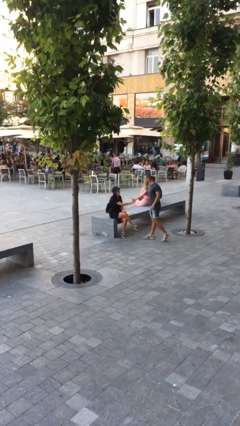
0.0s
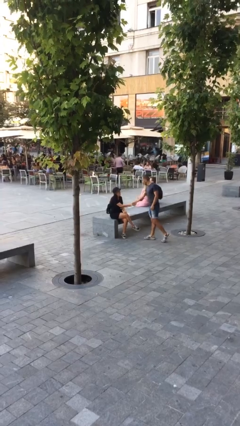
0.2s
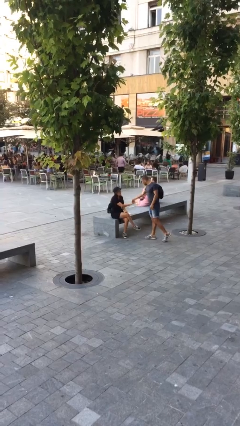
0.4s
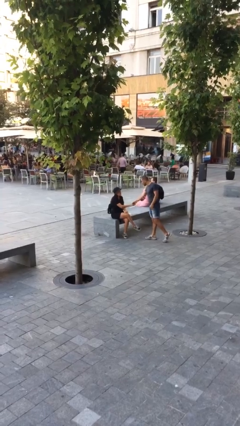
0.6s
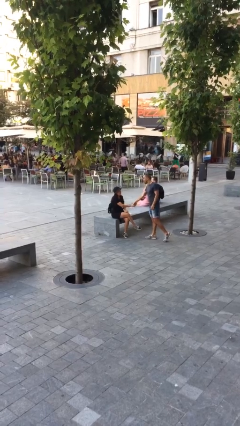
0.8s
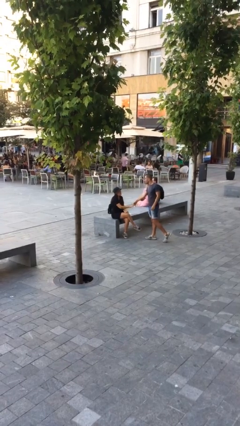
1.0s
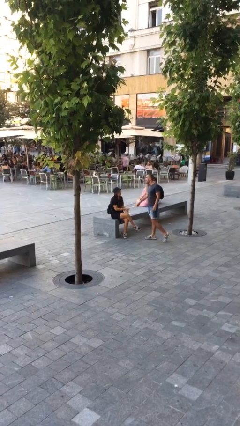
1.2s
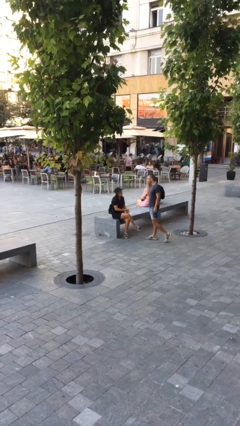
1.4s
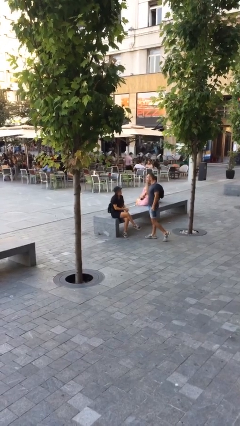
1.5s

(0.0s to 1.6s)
person shakes hand

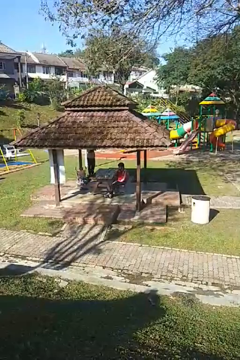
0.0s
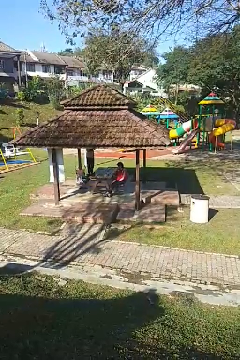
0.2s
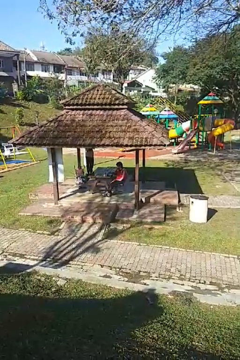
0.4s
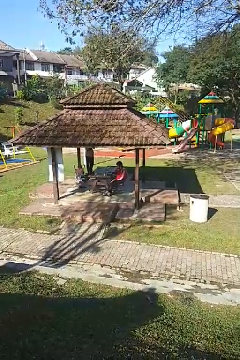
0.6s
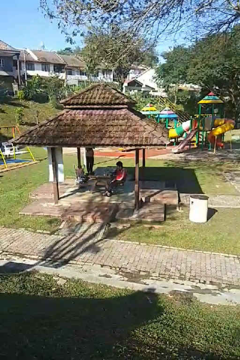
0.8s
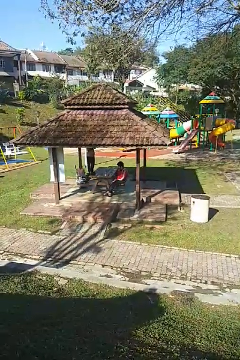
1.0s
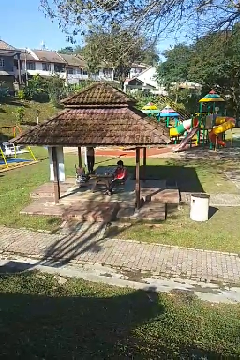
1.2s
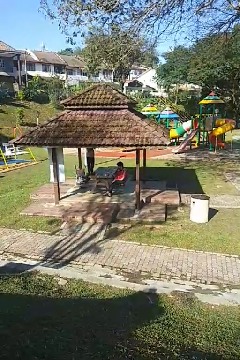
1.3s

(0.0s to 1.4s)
person puts down object on table

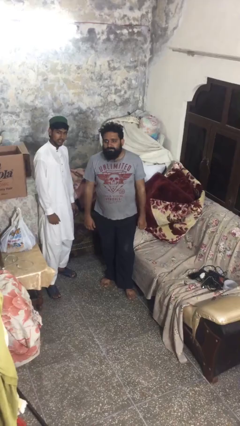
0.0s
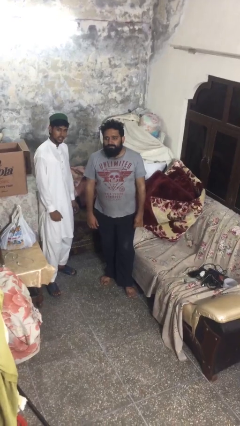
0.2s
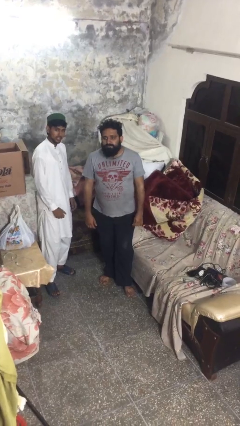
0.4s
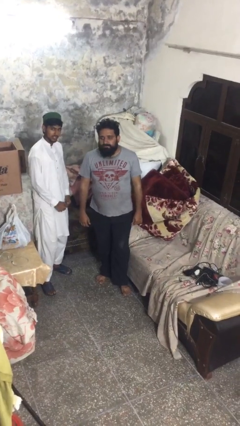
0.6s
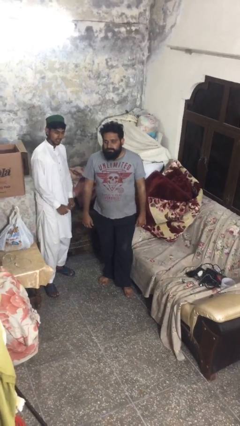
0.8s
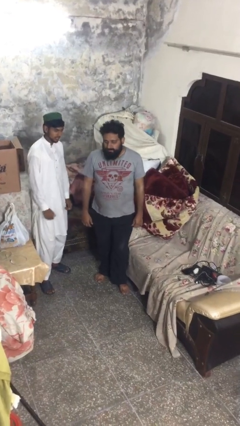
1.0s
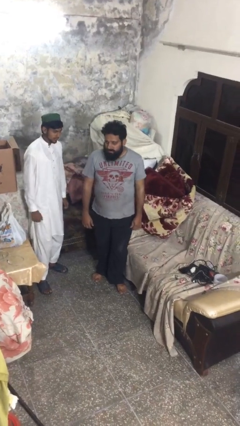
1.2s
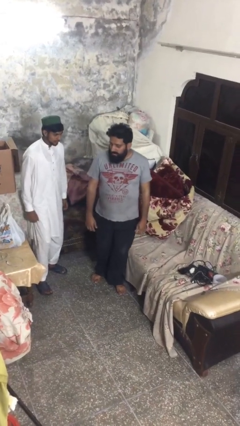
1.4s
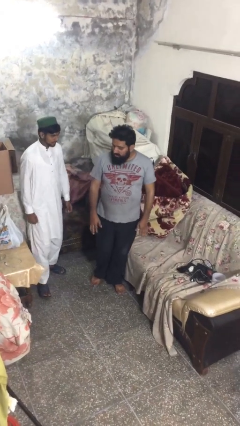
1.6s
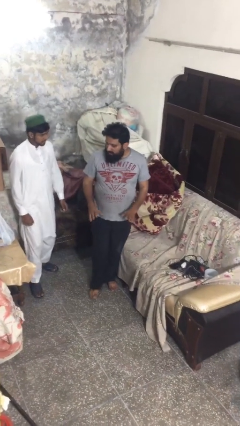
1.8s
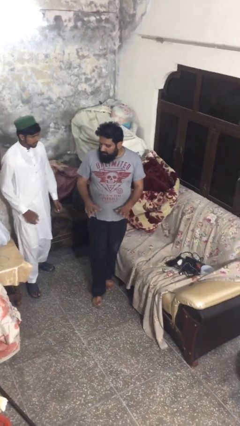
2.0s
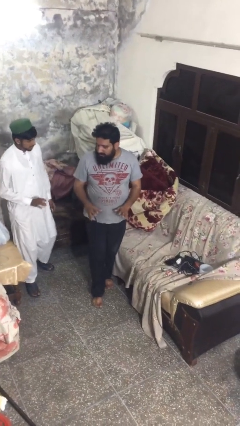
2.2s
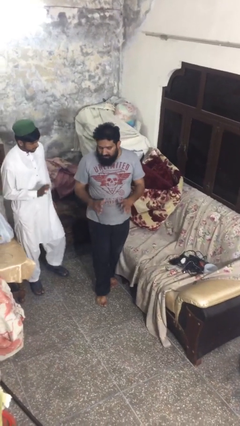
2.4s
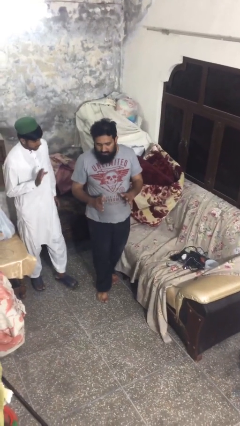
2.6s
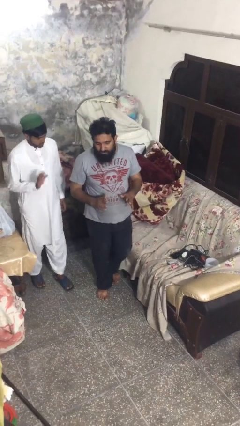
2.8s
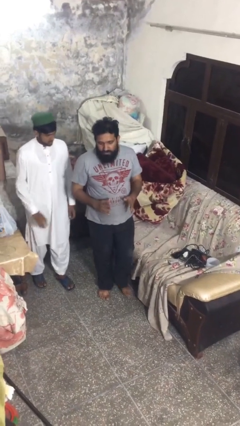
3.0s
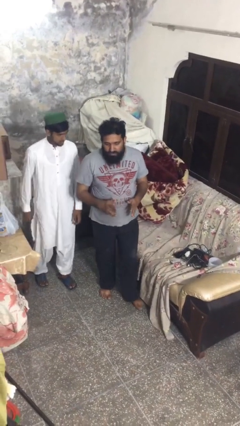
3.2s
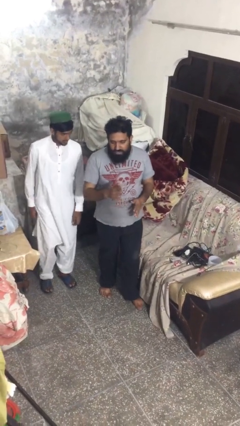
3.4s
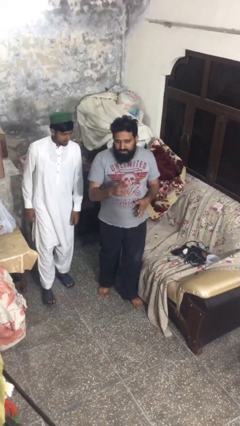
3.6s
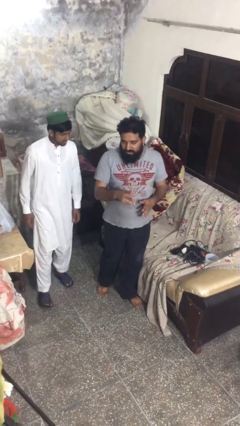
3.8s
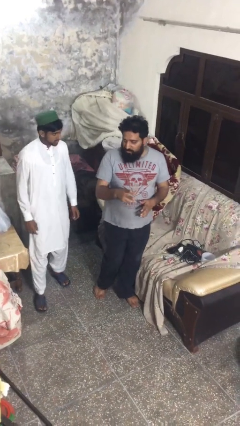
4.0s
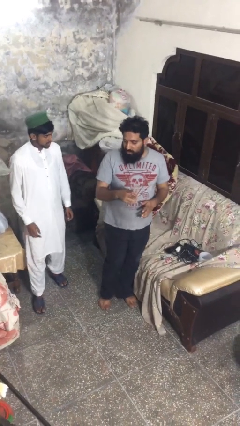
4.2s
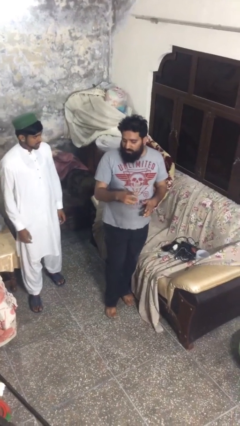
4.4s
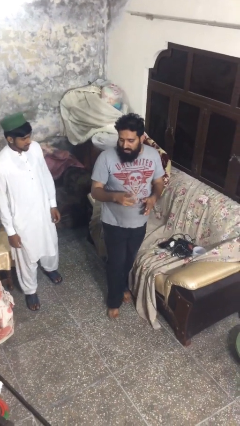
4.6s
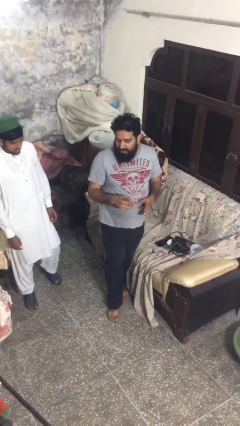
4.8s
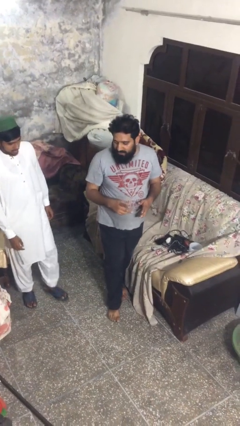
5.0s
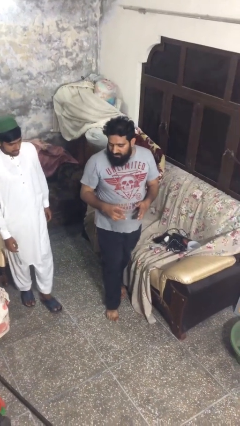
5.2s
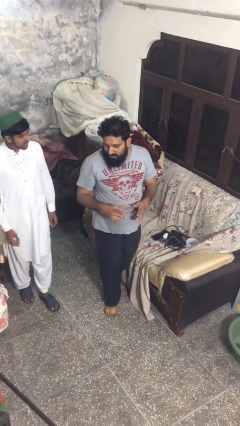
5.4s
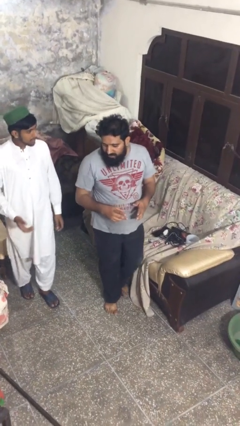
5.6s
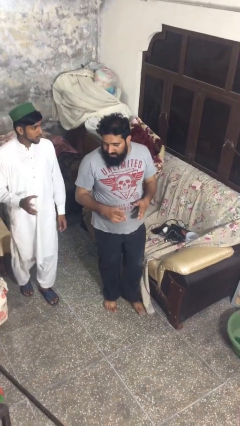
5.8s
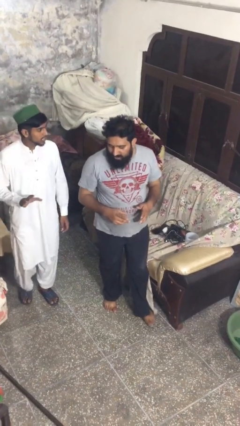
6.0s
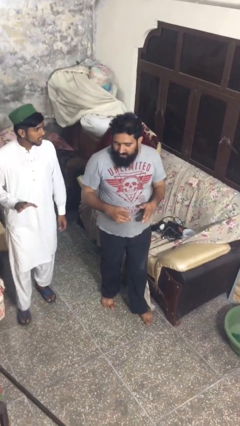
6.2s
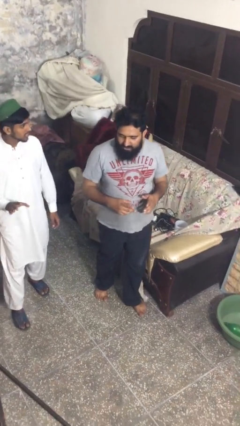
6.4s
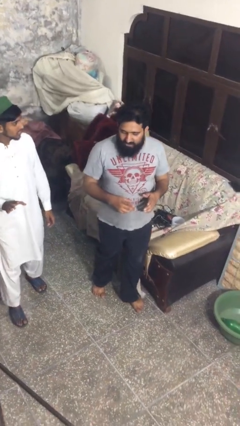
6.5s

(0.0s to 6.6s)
person talks to person

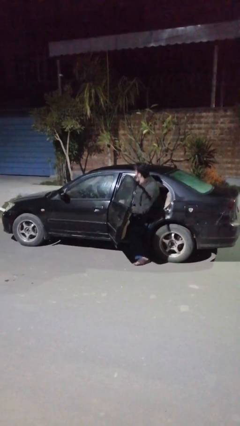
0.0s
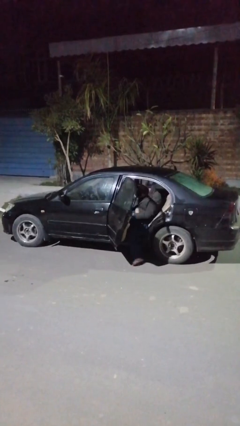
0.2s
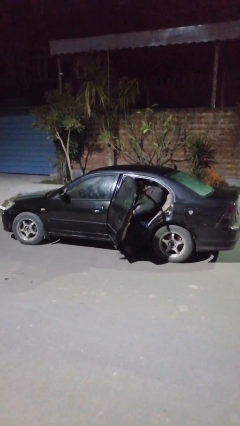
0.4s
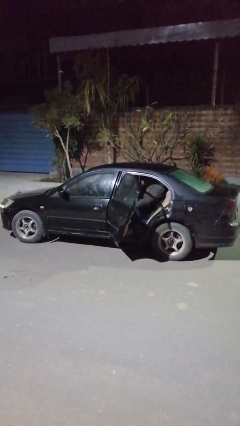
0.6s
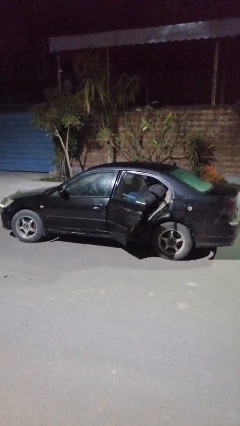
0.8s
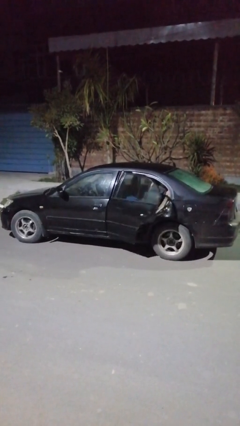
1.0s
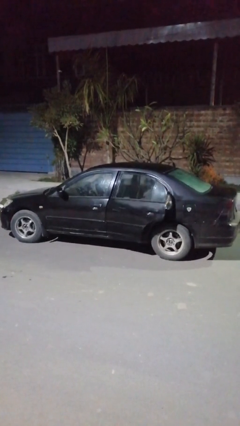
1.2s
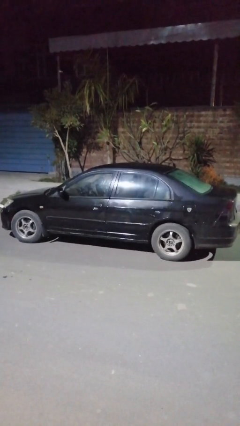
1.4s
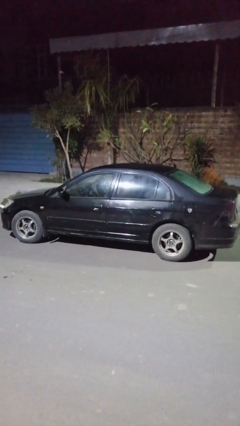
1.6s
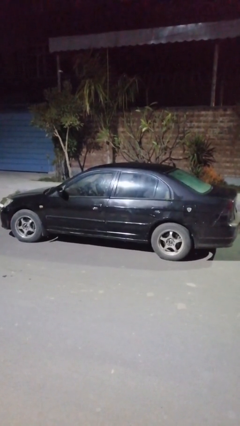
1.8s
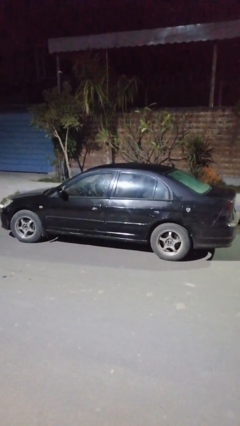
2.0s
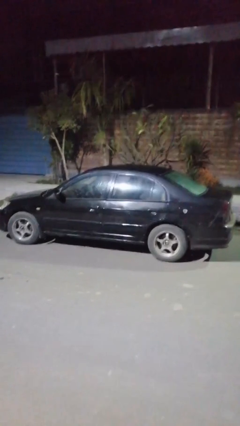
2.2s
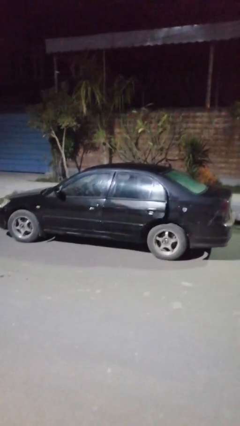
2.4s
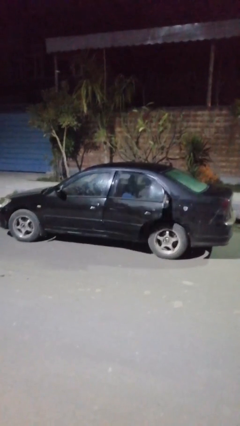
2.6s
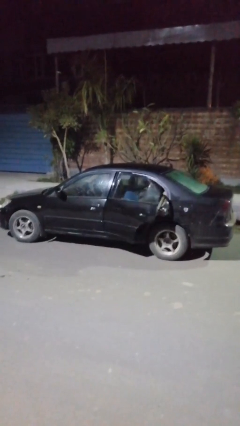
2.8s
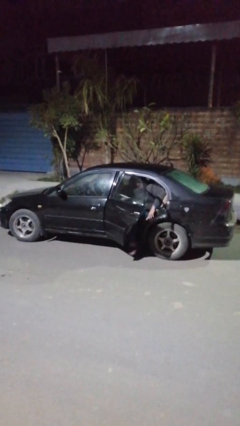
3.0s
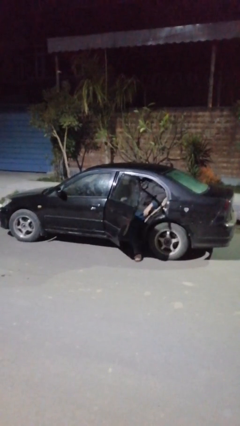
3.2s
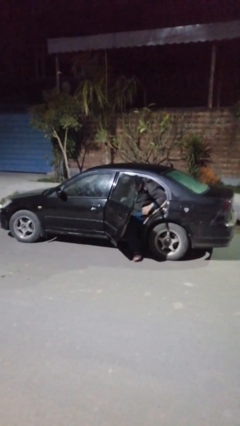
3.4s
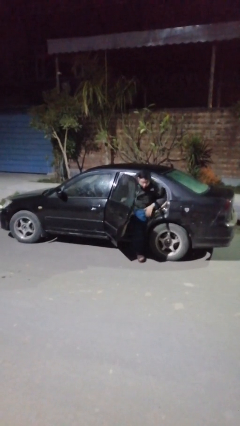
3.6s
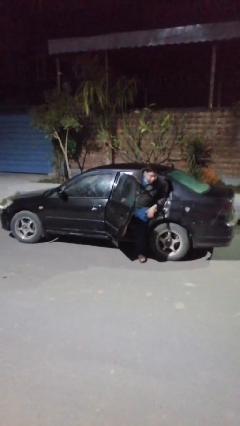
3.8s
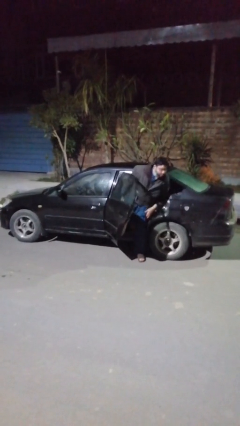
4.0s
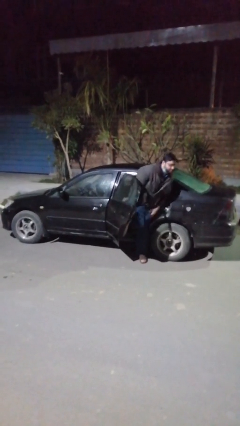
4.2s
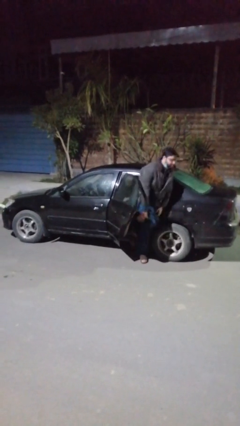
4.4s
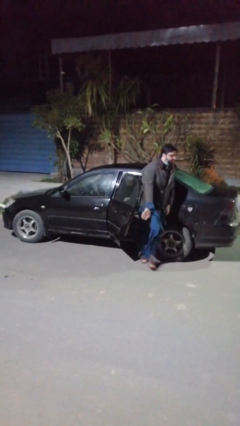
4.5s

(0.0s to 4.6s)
car picks up person

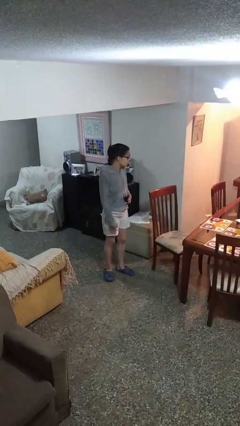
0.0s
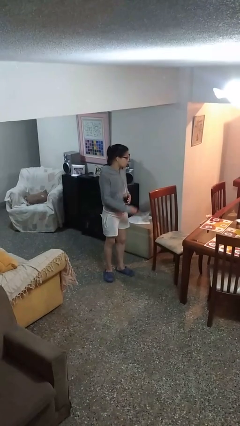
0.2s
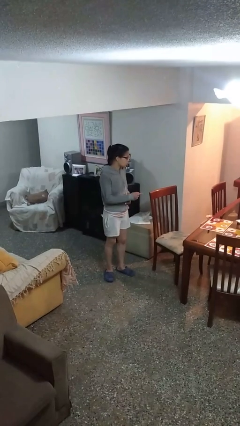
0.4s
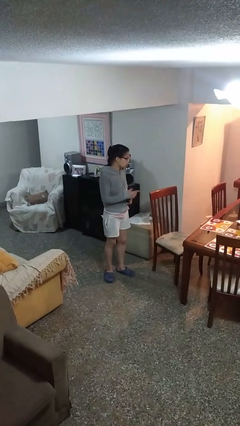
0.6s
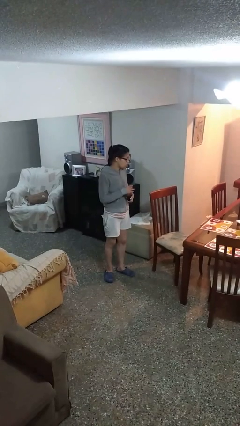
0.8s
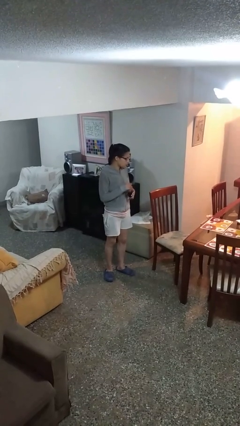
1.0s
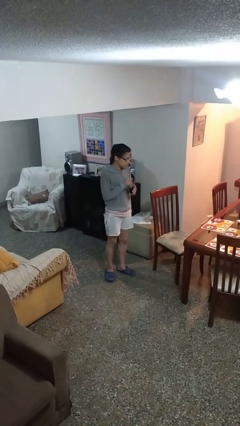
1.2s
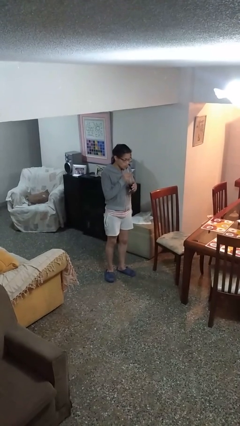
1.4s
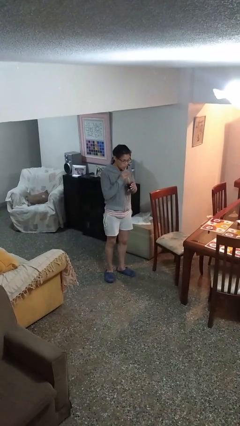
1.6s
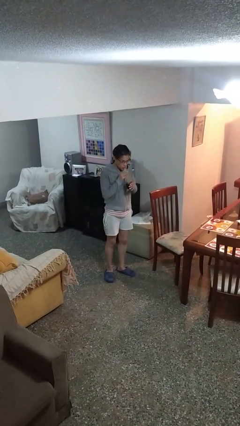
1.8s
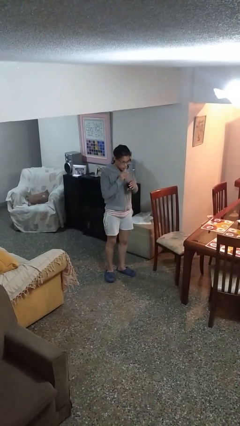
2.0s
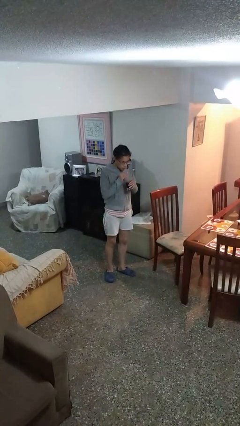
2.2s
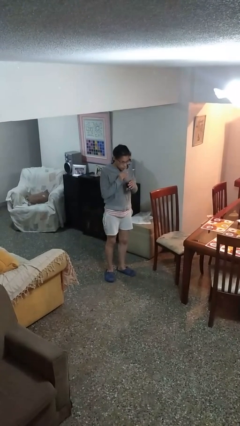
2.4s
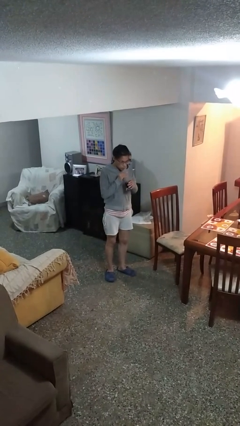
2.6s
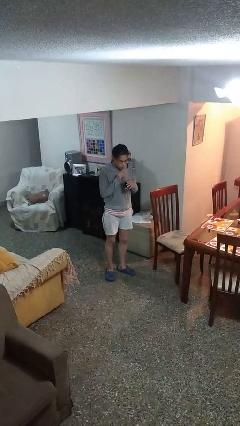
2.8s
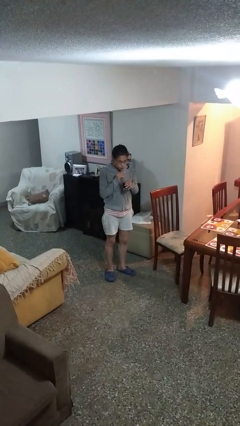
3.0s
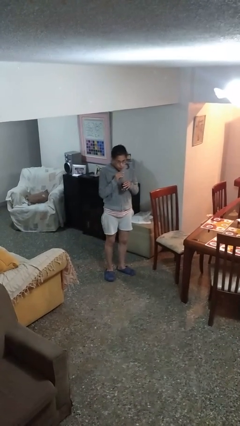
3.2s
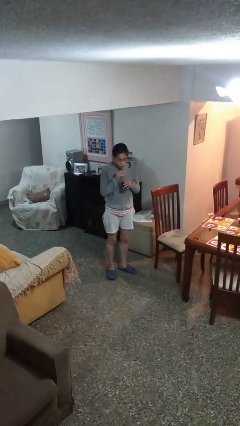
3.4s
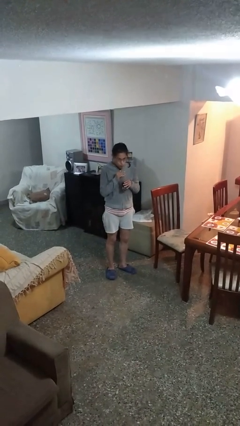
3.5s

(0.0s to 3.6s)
person drinks from straw
